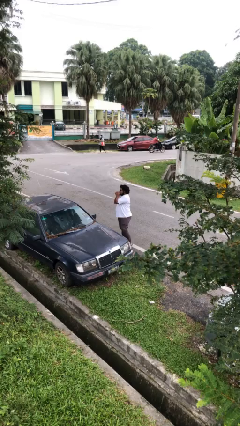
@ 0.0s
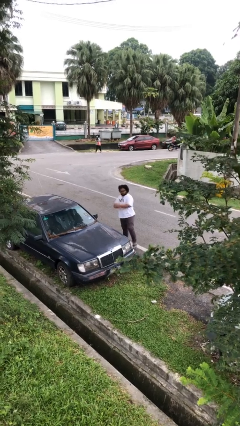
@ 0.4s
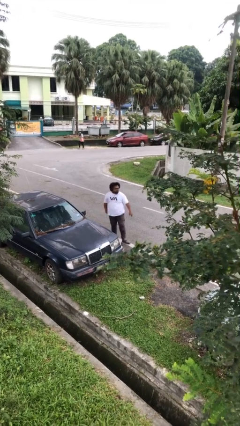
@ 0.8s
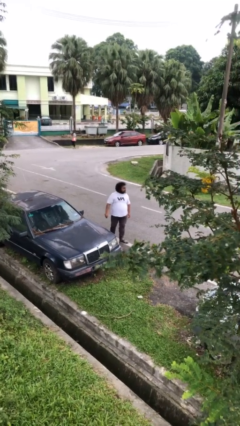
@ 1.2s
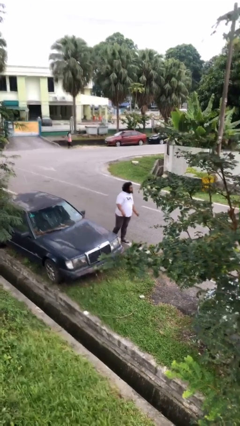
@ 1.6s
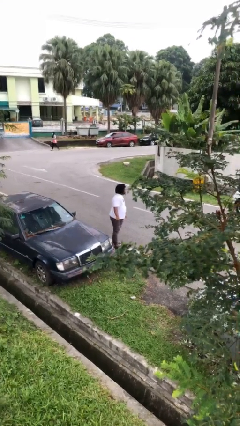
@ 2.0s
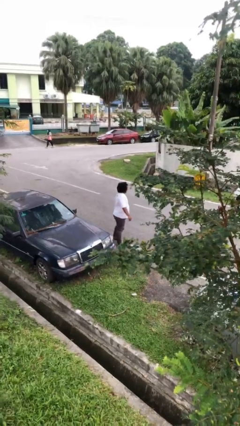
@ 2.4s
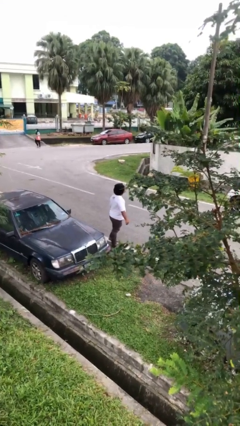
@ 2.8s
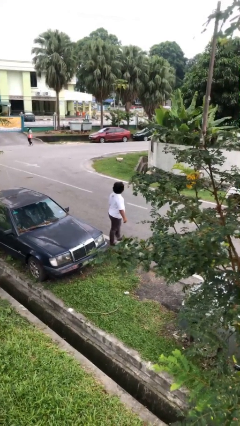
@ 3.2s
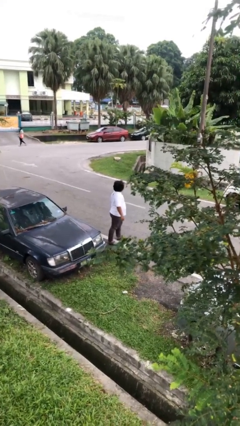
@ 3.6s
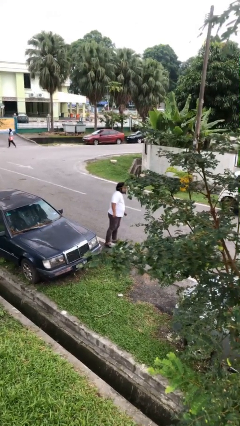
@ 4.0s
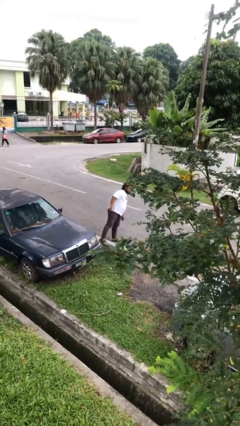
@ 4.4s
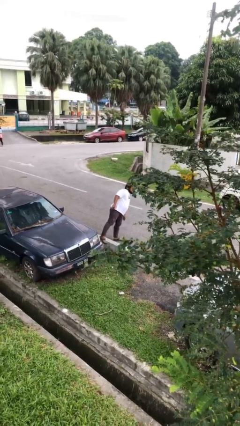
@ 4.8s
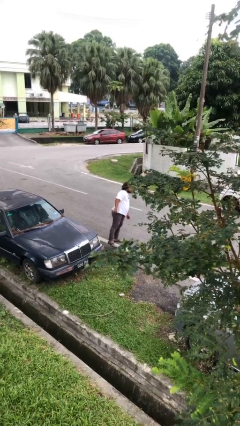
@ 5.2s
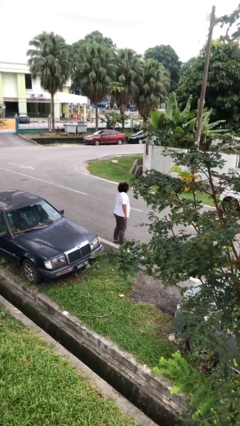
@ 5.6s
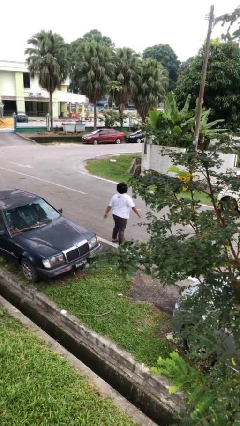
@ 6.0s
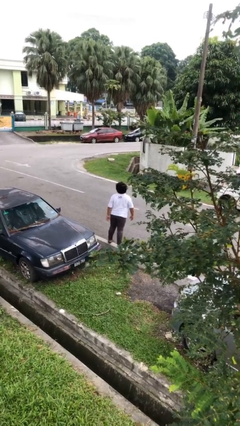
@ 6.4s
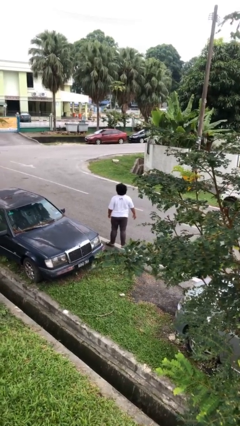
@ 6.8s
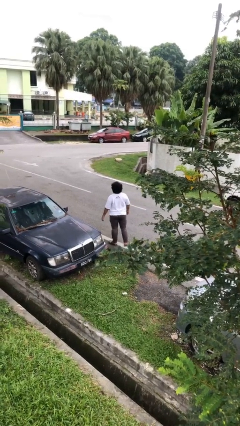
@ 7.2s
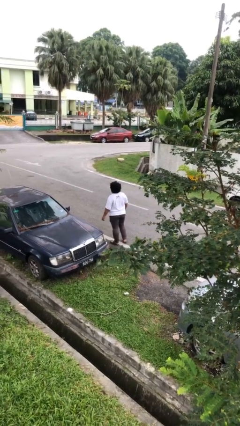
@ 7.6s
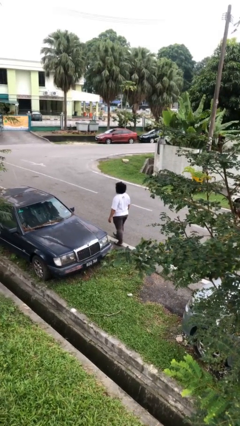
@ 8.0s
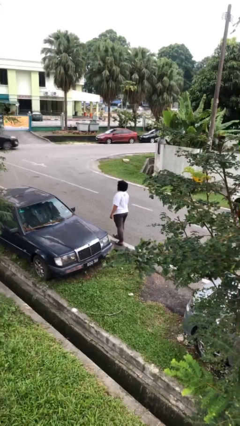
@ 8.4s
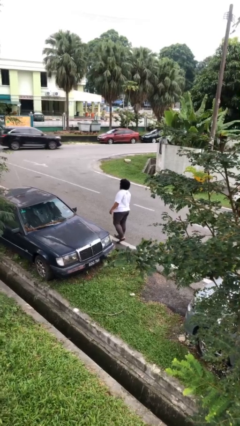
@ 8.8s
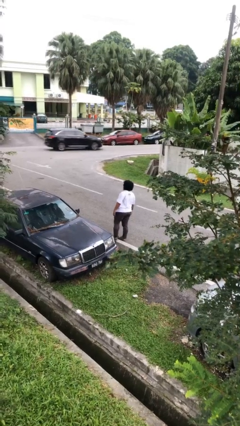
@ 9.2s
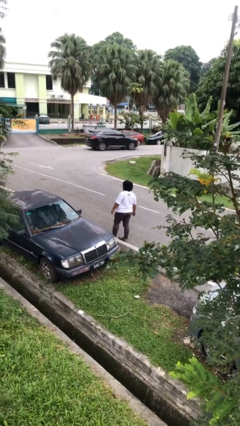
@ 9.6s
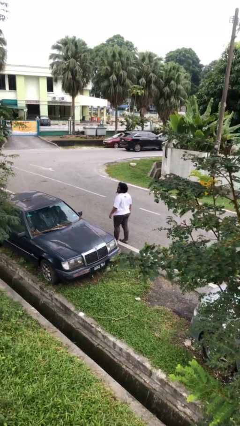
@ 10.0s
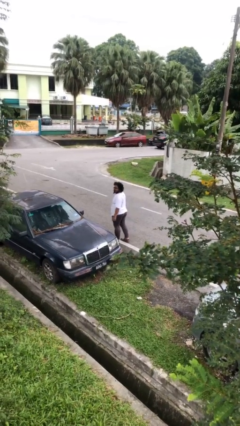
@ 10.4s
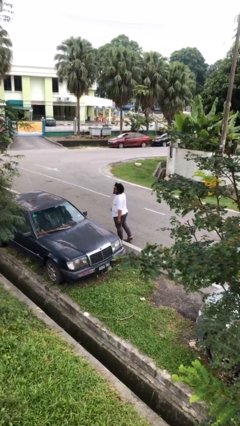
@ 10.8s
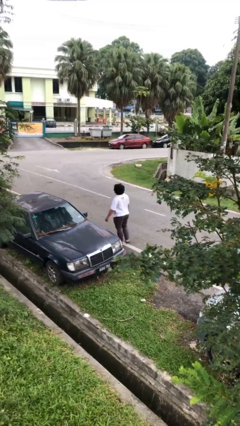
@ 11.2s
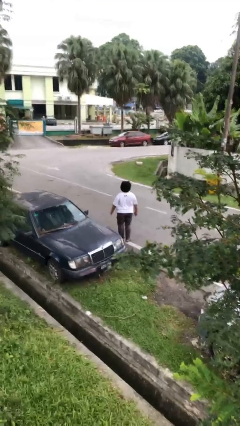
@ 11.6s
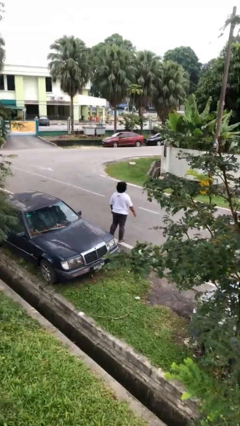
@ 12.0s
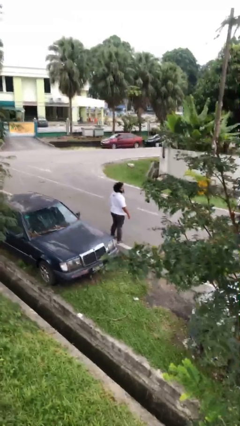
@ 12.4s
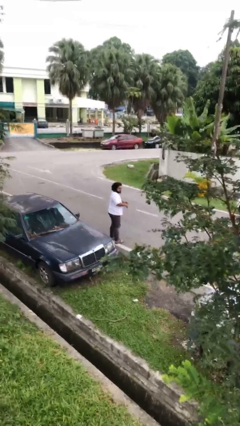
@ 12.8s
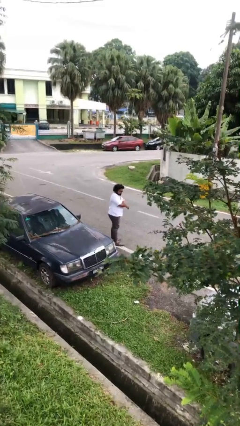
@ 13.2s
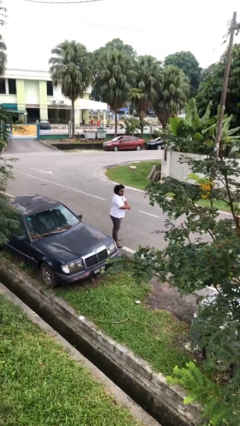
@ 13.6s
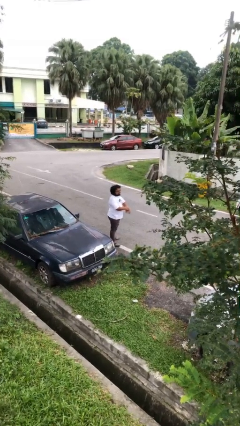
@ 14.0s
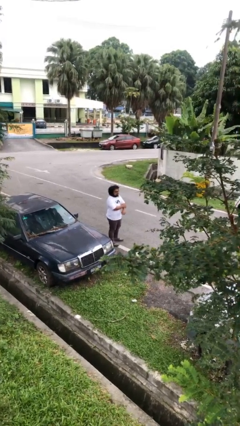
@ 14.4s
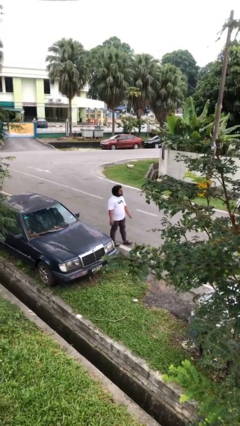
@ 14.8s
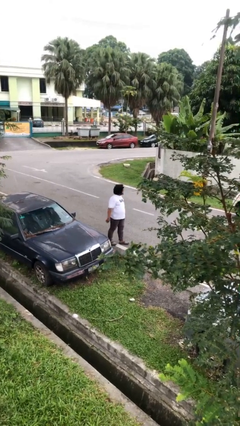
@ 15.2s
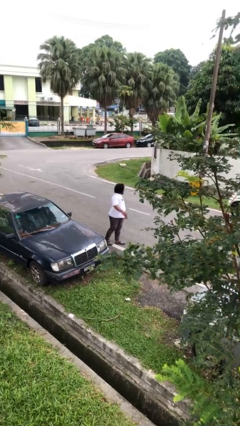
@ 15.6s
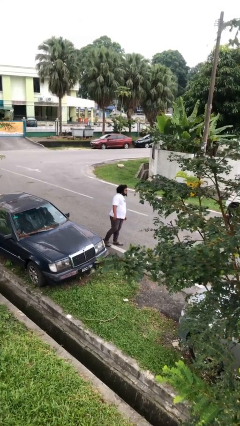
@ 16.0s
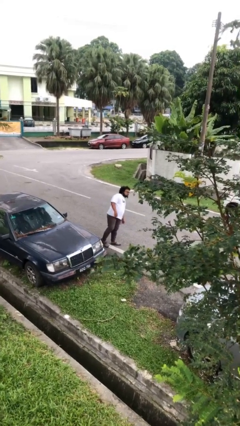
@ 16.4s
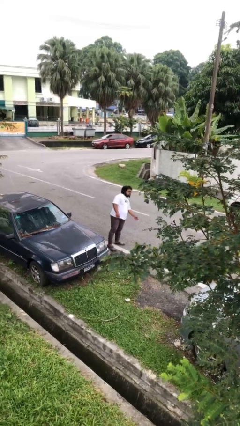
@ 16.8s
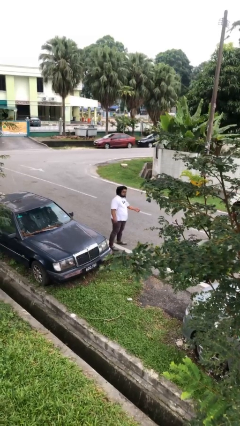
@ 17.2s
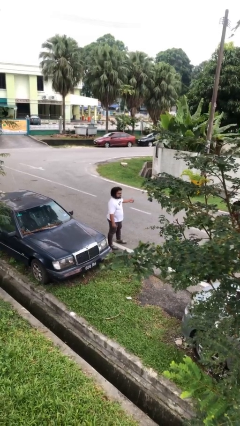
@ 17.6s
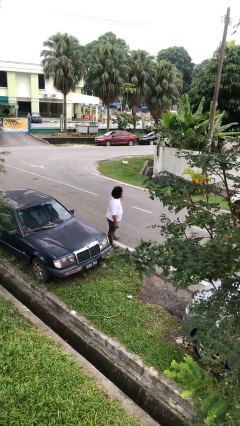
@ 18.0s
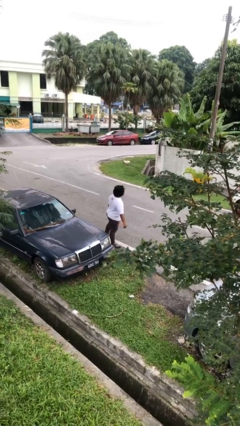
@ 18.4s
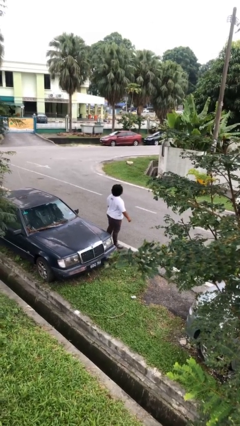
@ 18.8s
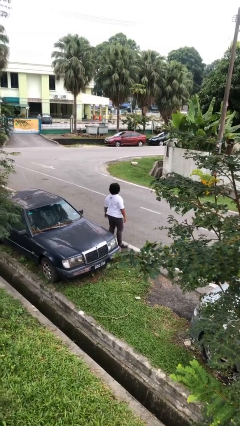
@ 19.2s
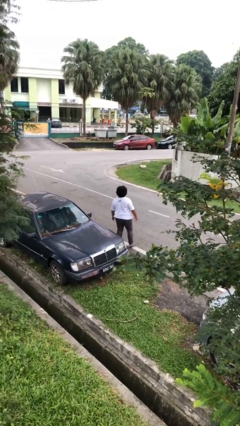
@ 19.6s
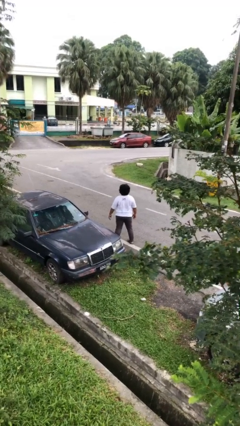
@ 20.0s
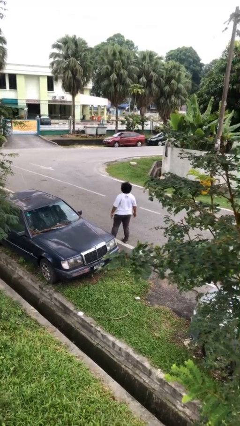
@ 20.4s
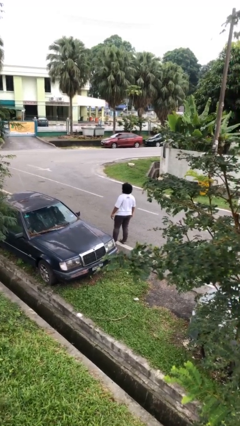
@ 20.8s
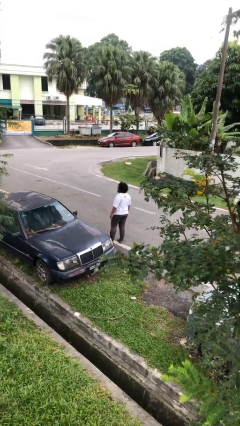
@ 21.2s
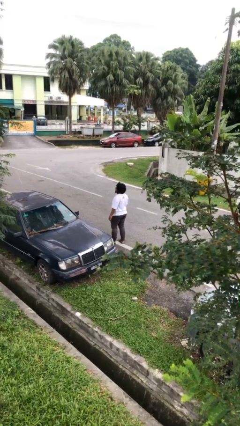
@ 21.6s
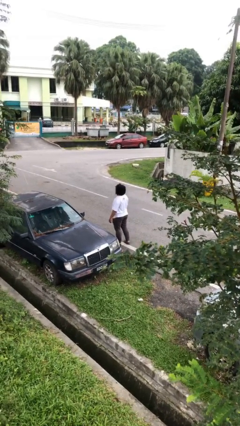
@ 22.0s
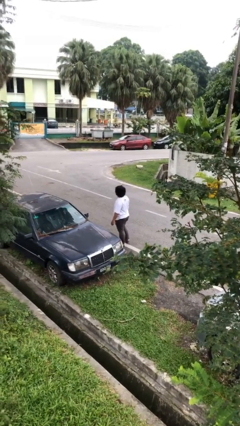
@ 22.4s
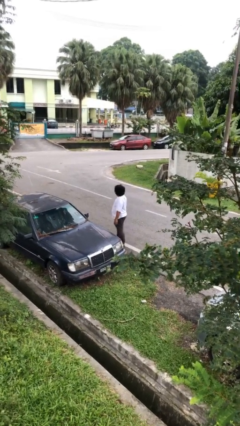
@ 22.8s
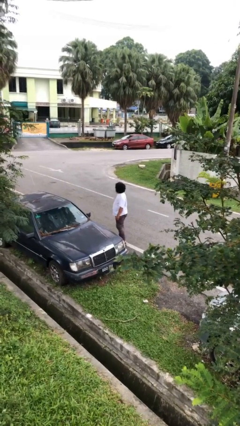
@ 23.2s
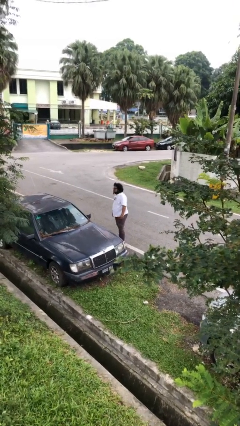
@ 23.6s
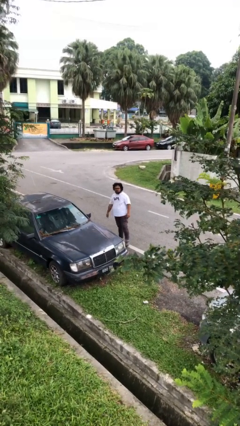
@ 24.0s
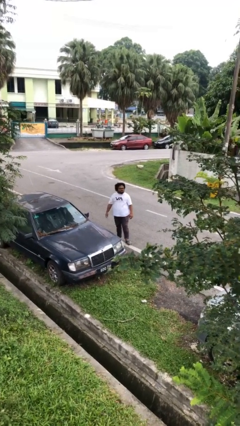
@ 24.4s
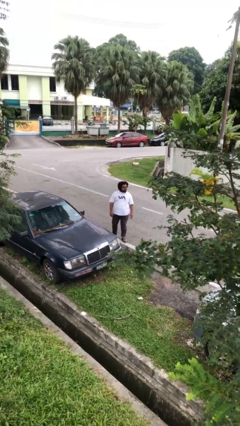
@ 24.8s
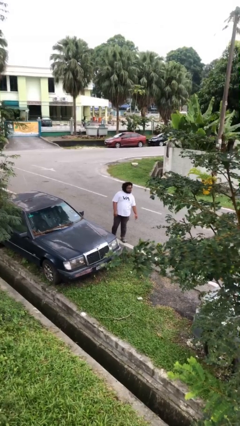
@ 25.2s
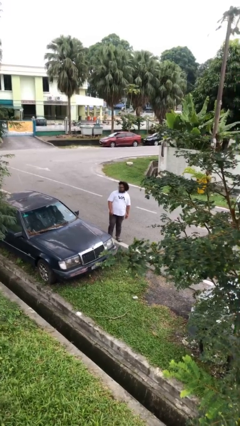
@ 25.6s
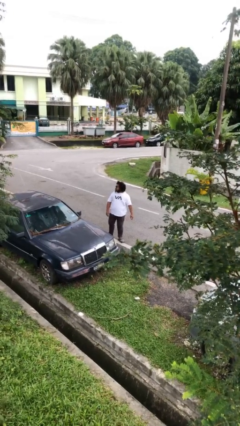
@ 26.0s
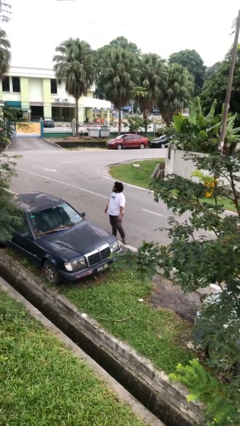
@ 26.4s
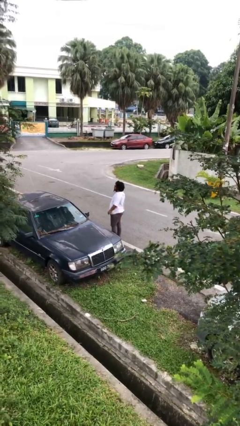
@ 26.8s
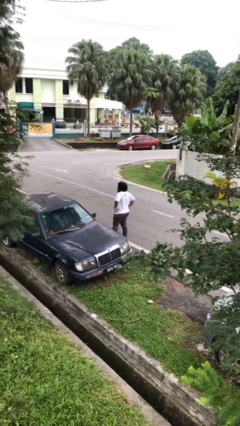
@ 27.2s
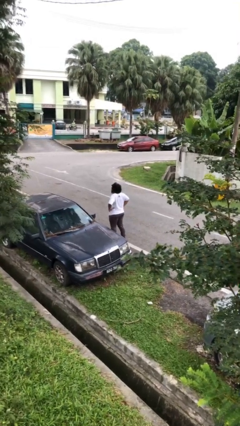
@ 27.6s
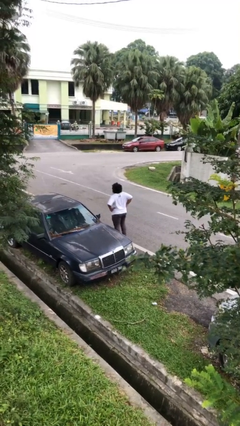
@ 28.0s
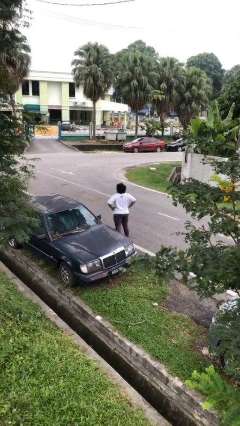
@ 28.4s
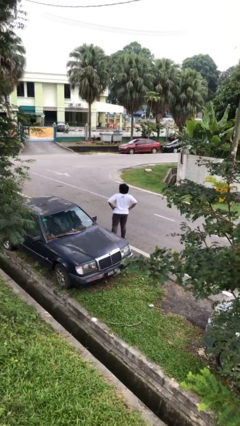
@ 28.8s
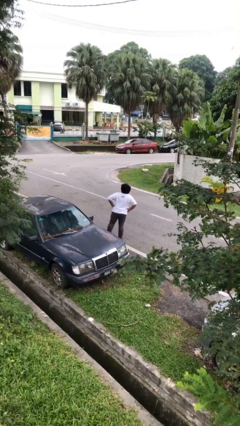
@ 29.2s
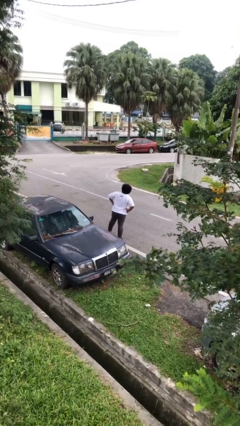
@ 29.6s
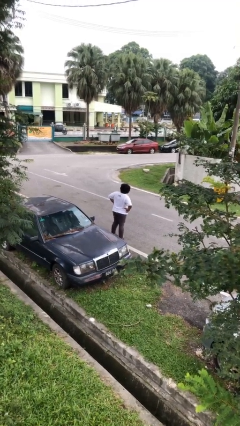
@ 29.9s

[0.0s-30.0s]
person walks

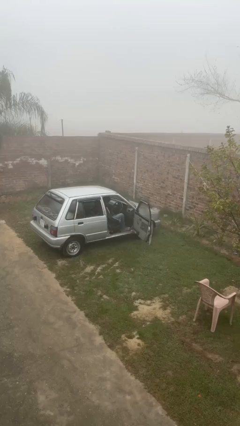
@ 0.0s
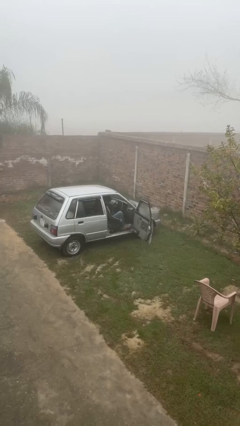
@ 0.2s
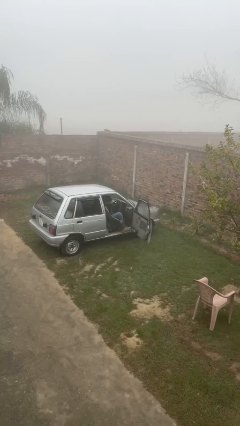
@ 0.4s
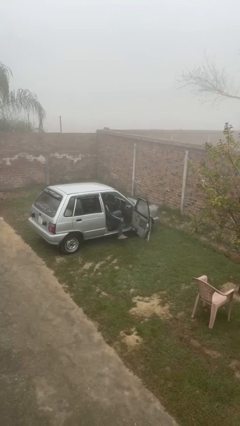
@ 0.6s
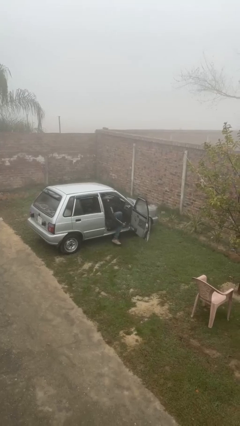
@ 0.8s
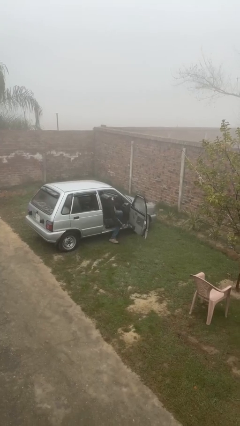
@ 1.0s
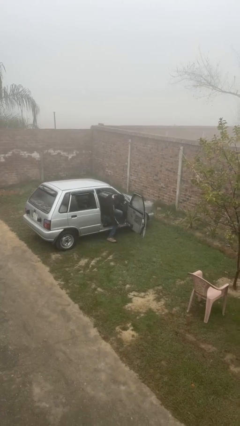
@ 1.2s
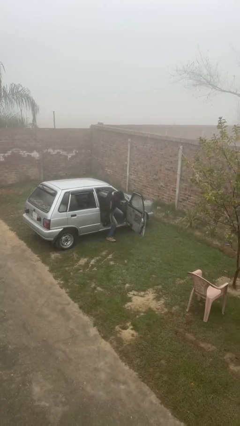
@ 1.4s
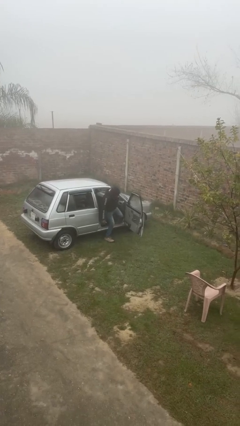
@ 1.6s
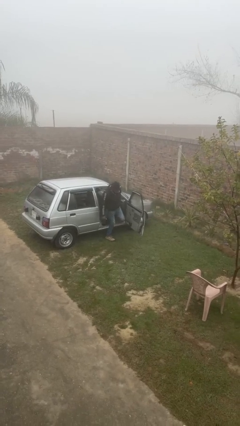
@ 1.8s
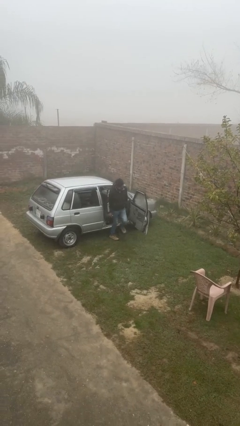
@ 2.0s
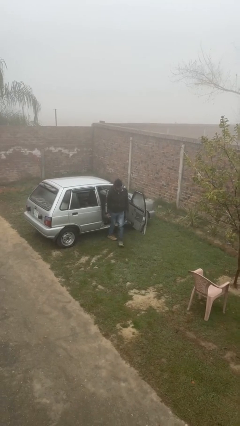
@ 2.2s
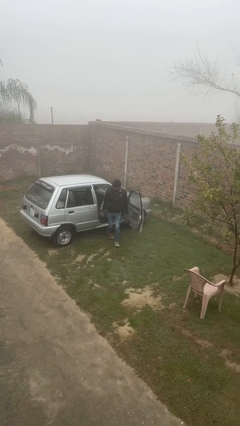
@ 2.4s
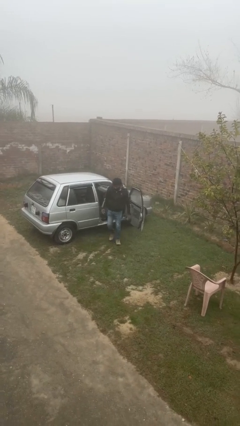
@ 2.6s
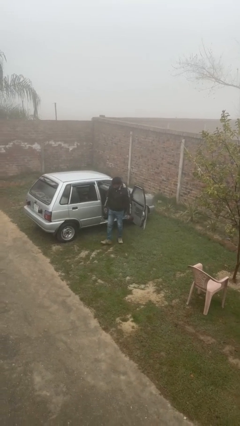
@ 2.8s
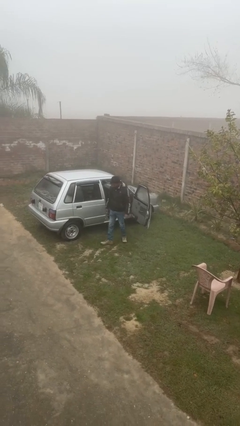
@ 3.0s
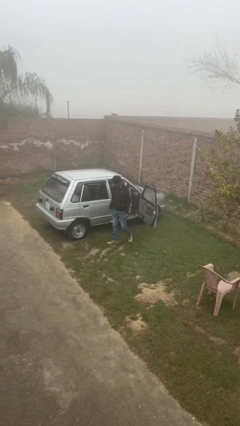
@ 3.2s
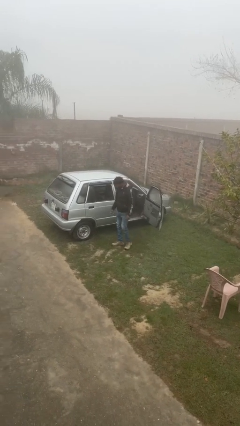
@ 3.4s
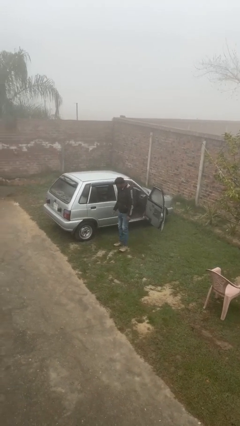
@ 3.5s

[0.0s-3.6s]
person exits car
